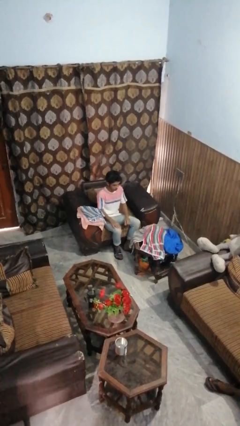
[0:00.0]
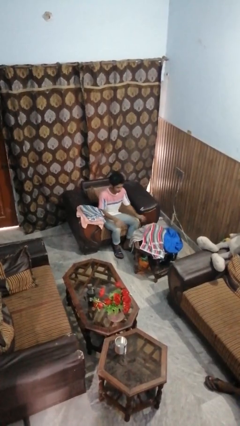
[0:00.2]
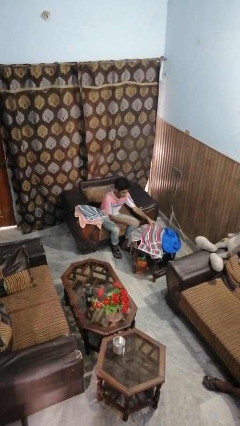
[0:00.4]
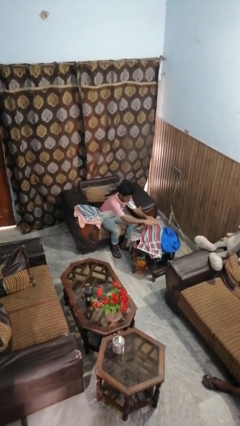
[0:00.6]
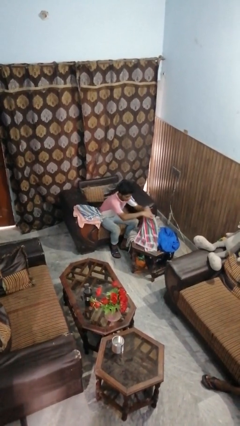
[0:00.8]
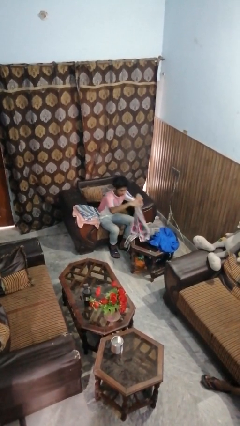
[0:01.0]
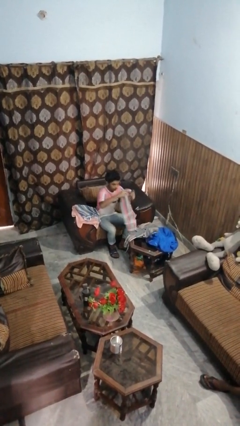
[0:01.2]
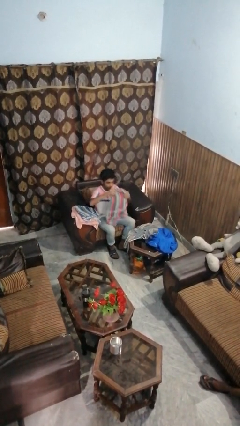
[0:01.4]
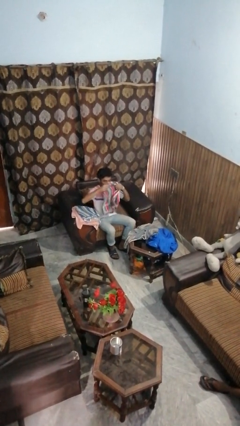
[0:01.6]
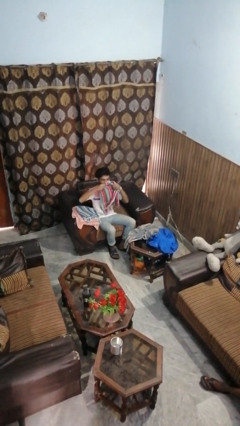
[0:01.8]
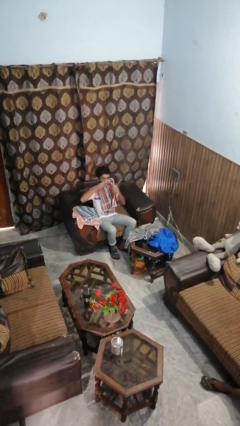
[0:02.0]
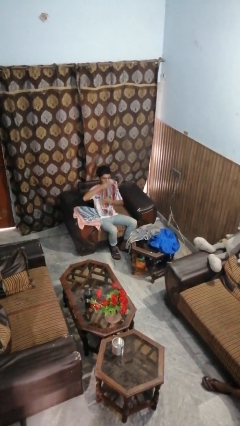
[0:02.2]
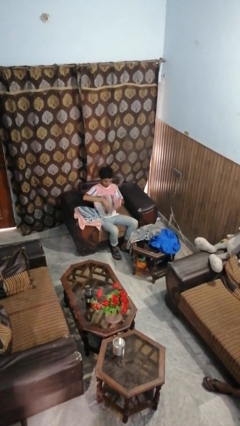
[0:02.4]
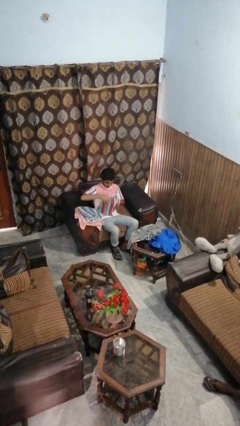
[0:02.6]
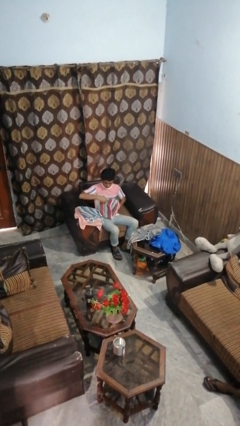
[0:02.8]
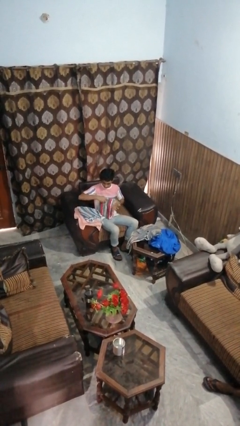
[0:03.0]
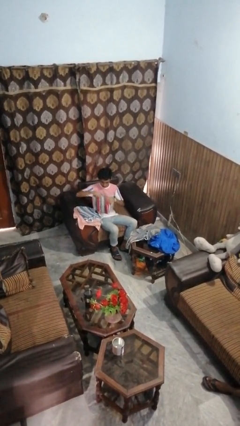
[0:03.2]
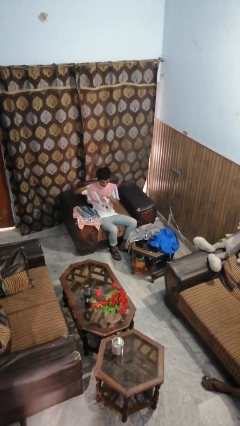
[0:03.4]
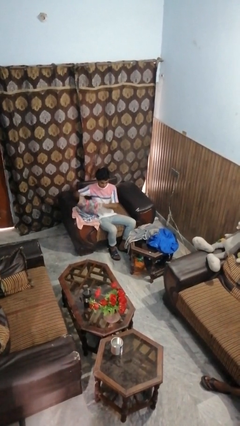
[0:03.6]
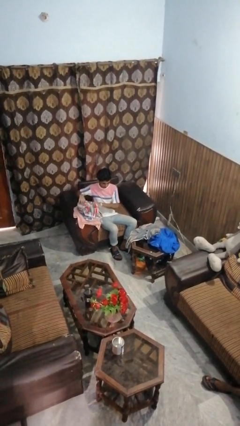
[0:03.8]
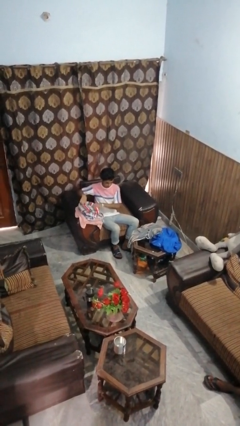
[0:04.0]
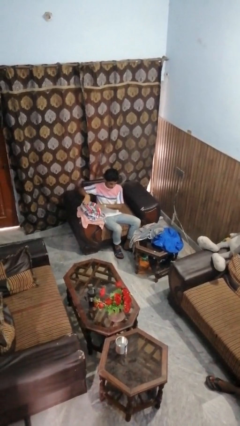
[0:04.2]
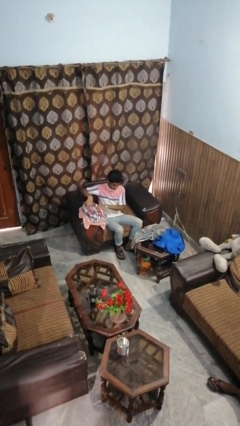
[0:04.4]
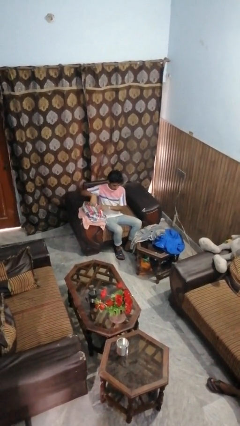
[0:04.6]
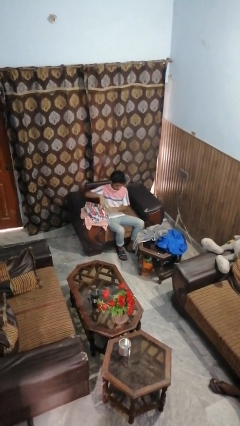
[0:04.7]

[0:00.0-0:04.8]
person folds towel

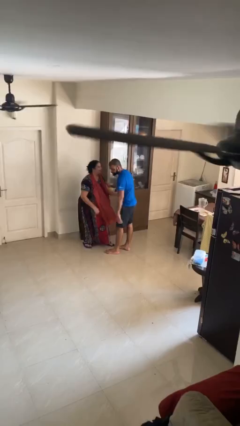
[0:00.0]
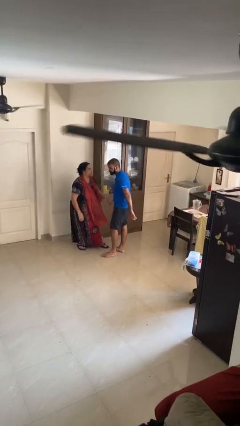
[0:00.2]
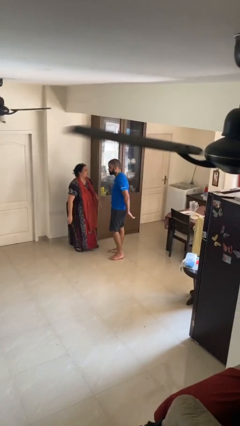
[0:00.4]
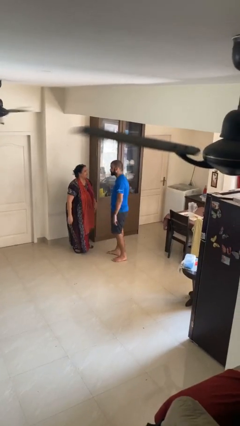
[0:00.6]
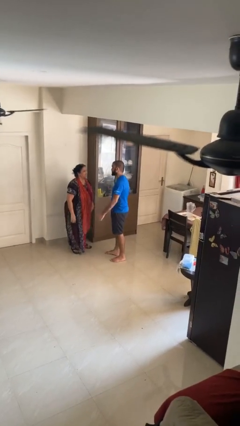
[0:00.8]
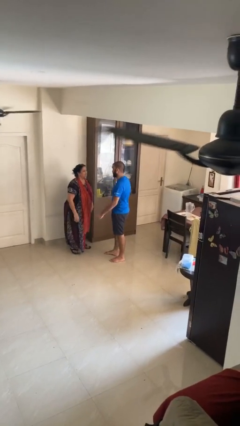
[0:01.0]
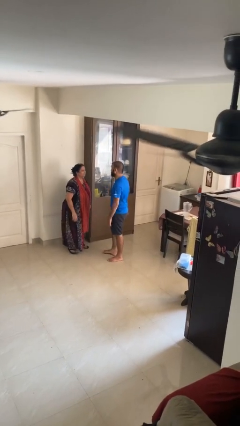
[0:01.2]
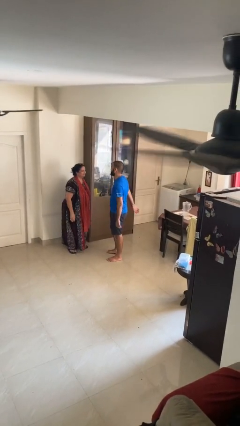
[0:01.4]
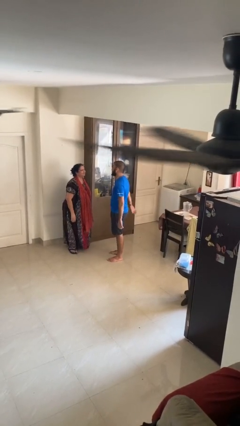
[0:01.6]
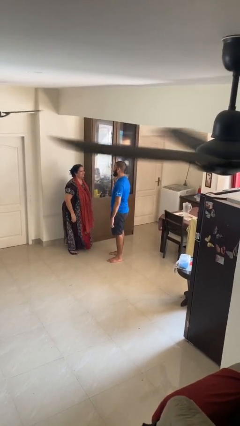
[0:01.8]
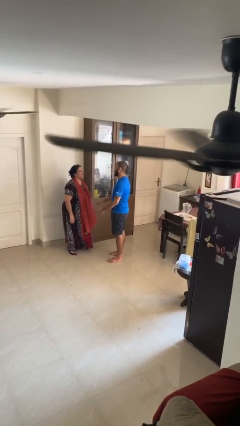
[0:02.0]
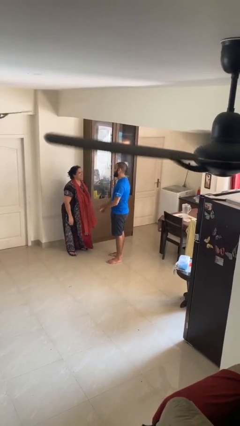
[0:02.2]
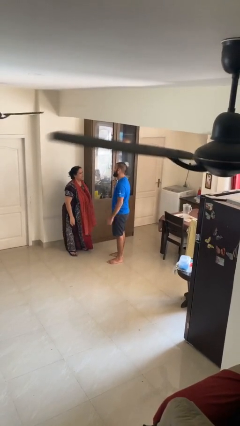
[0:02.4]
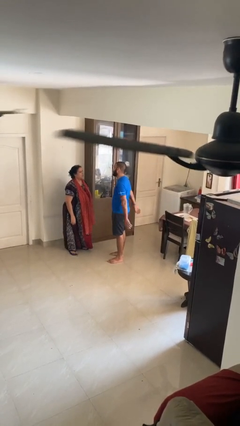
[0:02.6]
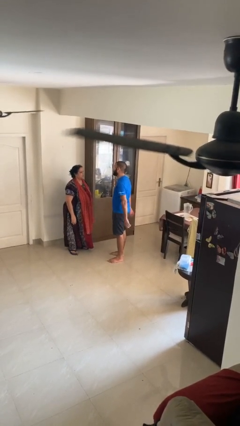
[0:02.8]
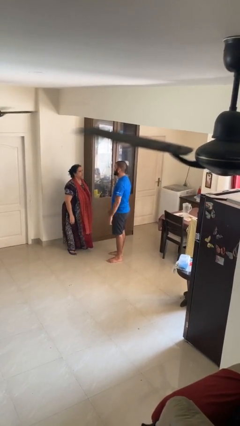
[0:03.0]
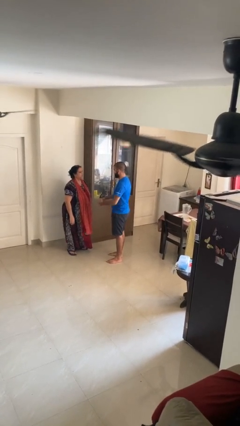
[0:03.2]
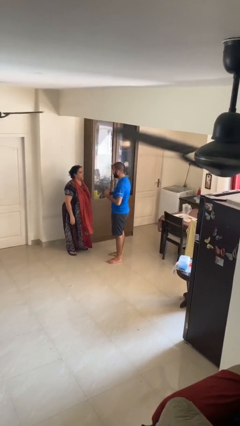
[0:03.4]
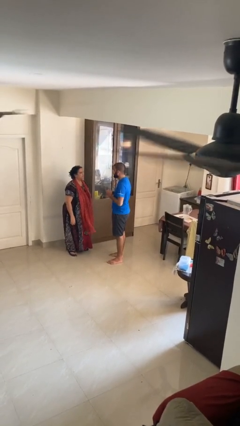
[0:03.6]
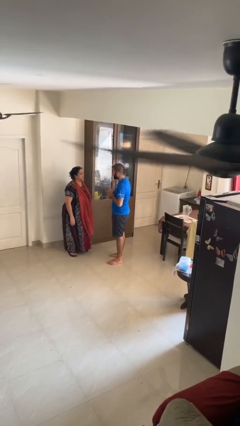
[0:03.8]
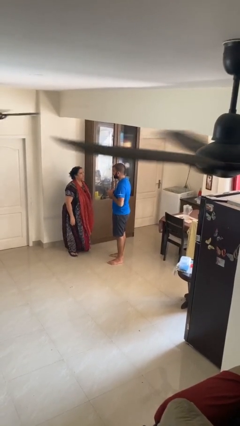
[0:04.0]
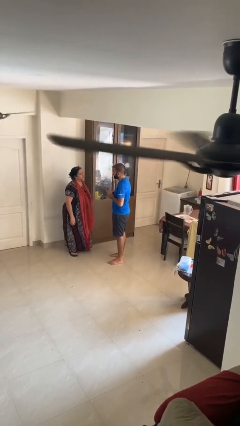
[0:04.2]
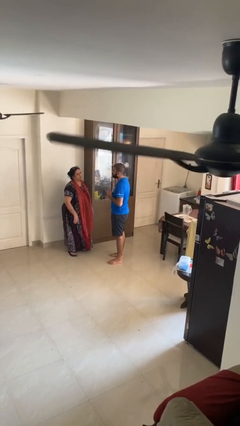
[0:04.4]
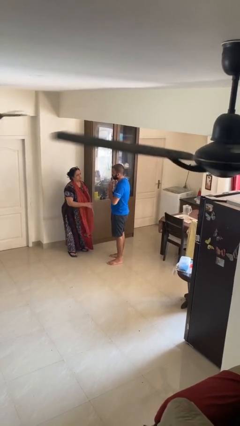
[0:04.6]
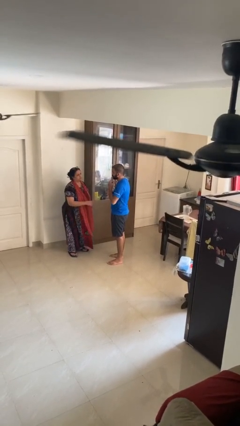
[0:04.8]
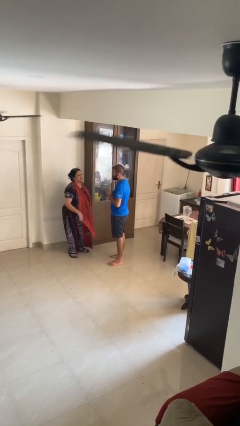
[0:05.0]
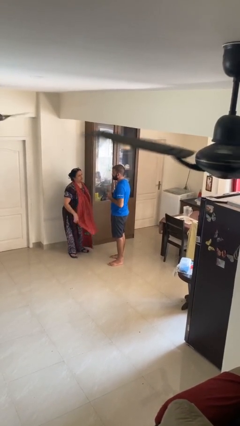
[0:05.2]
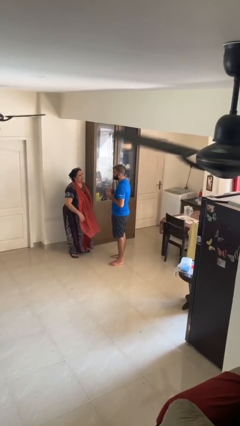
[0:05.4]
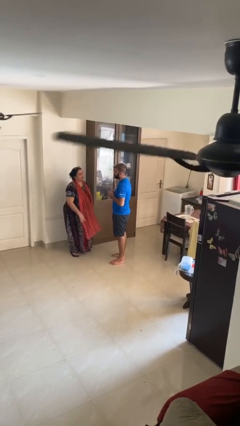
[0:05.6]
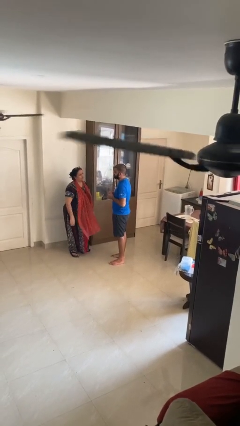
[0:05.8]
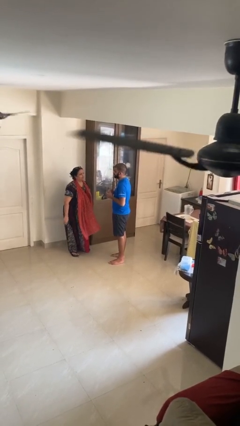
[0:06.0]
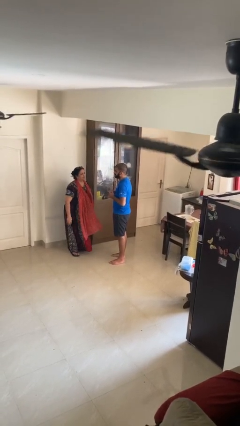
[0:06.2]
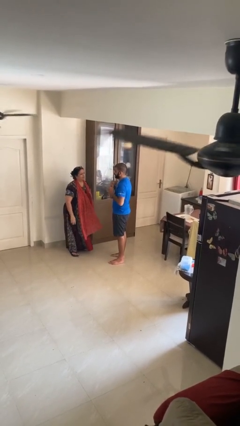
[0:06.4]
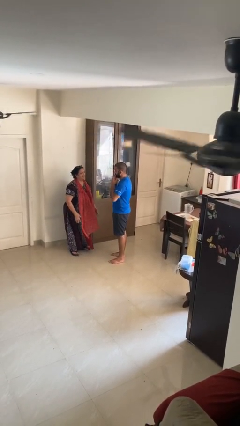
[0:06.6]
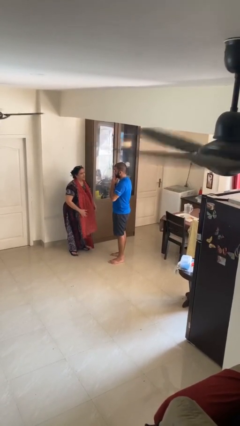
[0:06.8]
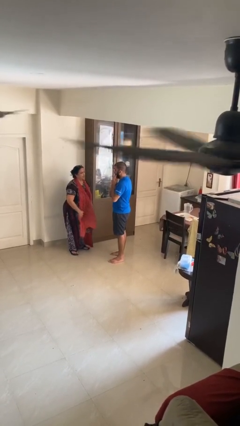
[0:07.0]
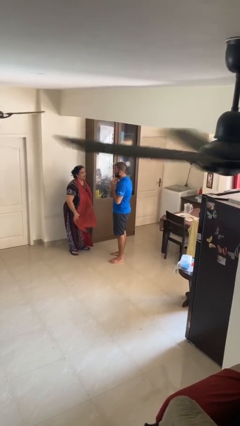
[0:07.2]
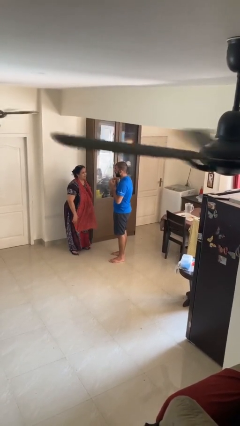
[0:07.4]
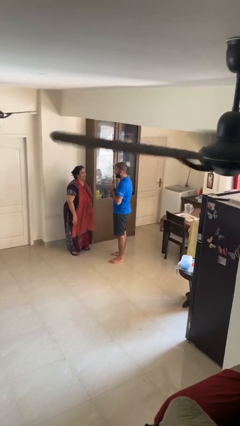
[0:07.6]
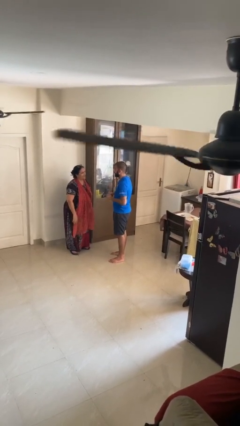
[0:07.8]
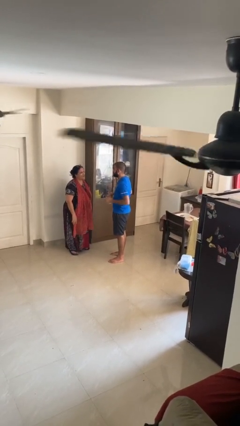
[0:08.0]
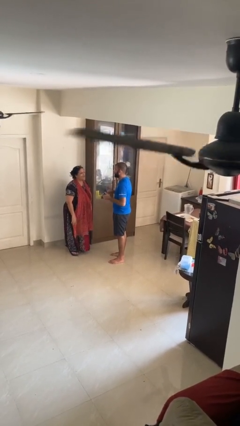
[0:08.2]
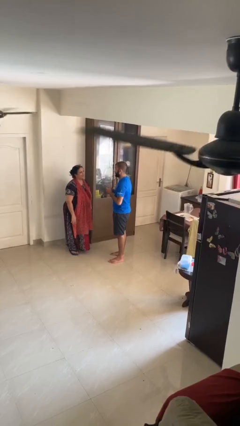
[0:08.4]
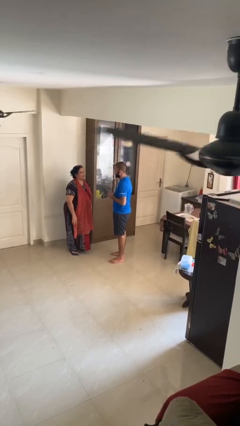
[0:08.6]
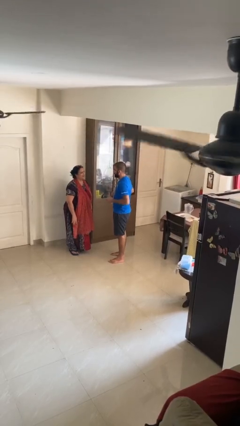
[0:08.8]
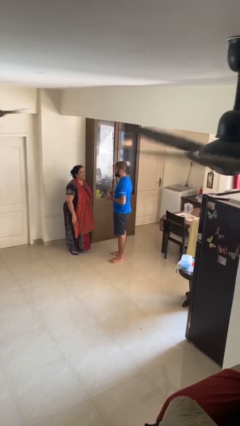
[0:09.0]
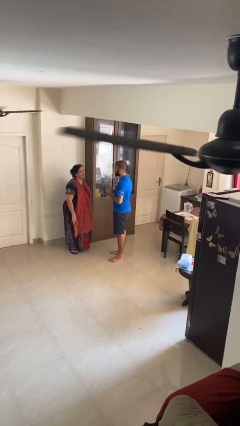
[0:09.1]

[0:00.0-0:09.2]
person talks to person

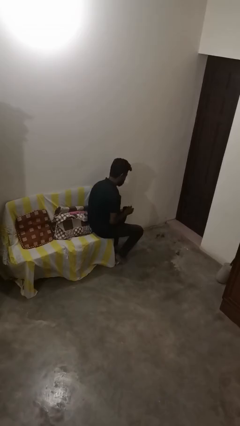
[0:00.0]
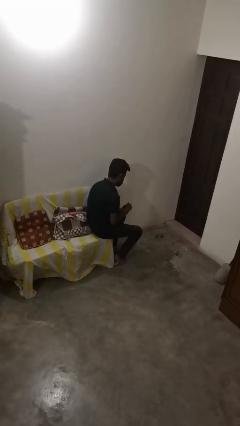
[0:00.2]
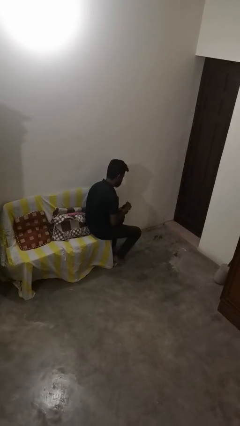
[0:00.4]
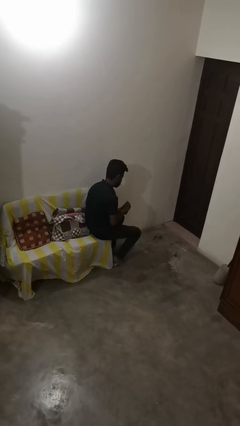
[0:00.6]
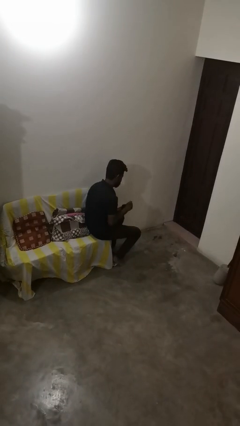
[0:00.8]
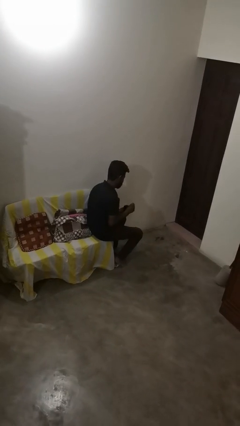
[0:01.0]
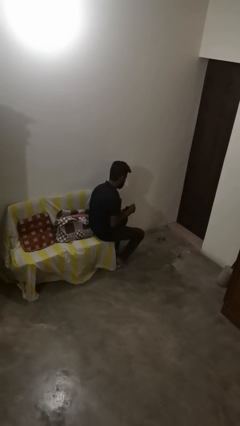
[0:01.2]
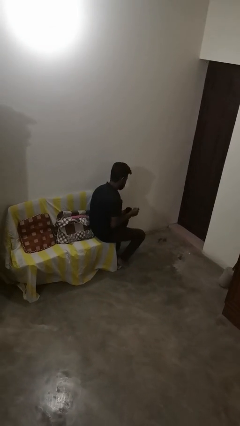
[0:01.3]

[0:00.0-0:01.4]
person stirs mug

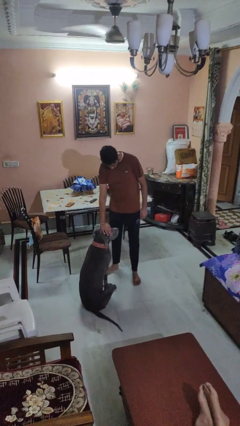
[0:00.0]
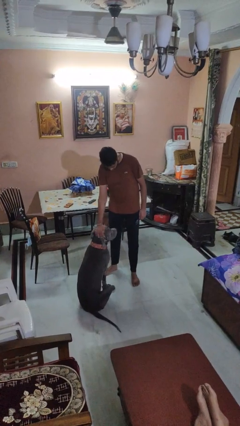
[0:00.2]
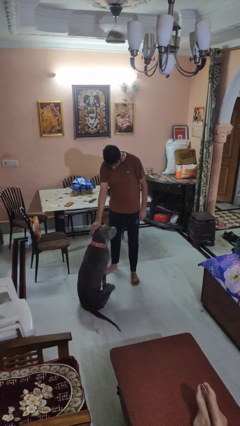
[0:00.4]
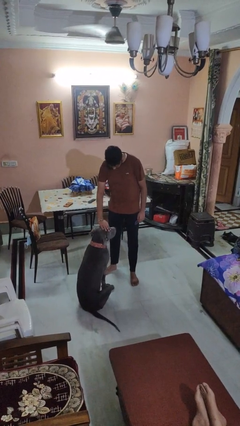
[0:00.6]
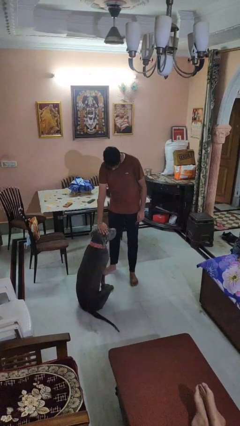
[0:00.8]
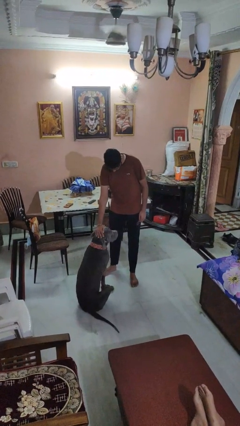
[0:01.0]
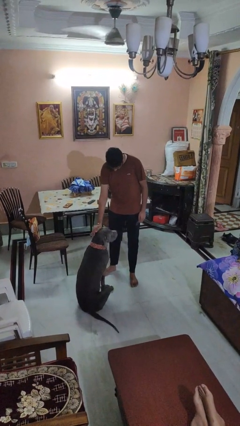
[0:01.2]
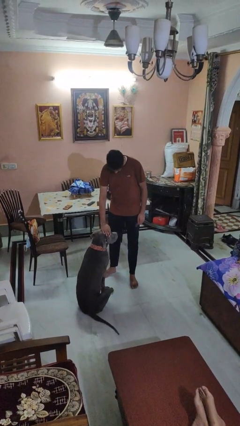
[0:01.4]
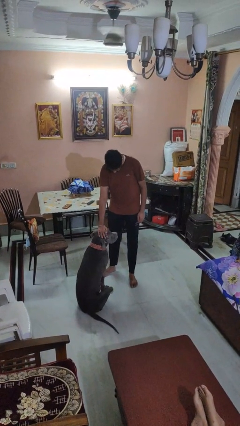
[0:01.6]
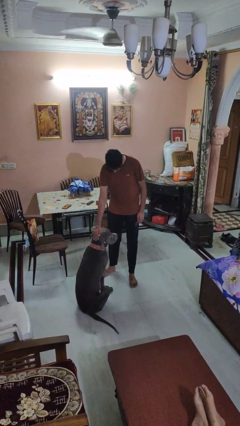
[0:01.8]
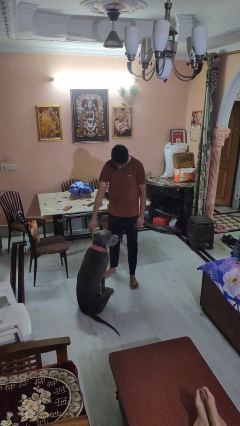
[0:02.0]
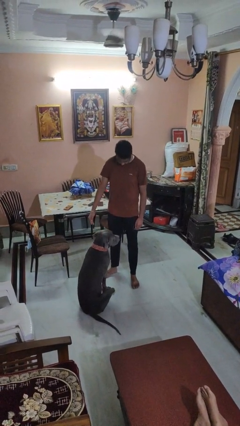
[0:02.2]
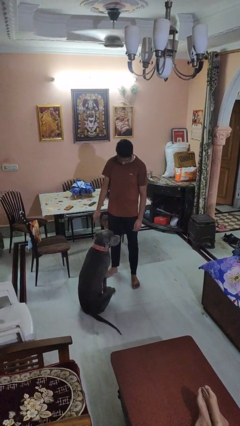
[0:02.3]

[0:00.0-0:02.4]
person pets dog
